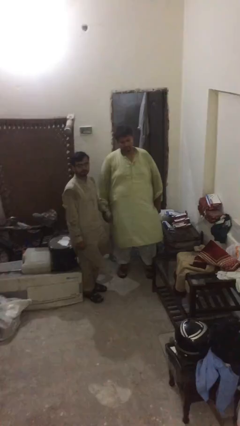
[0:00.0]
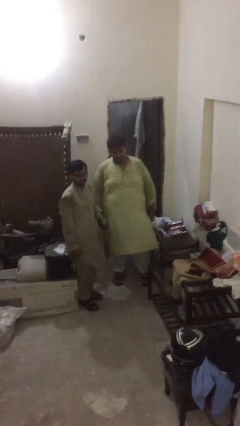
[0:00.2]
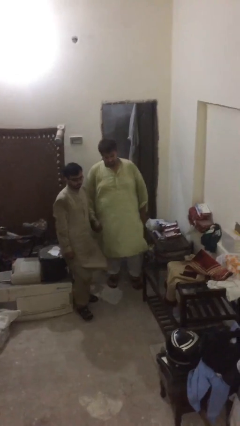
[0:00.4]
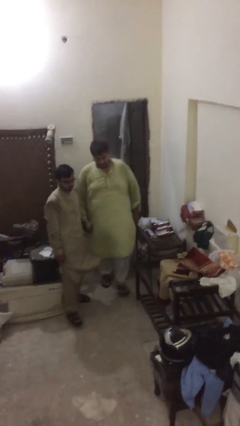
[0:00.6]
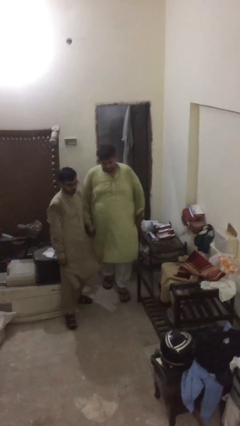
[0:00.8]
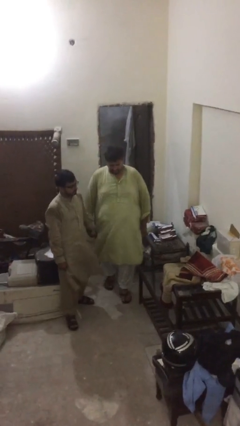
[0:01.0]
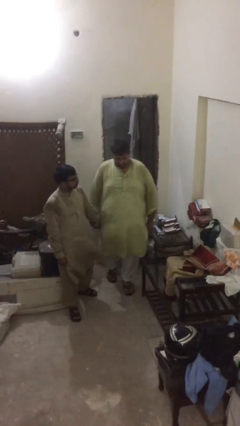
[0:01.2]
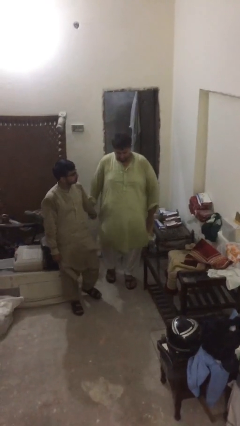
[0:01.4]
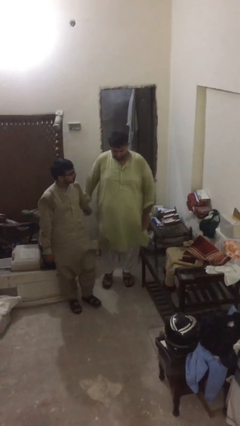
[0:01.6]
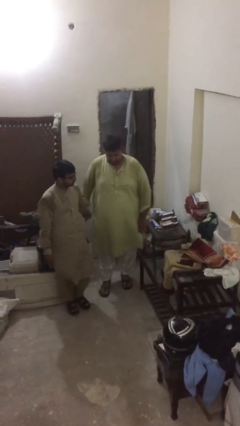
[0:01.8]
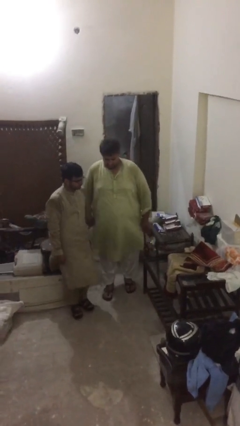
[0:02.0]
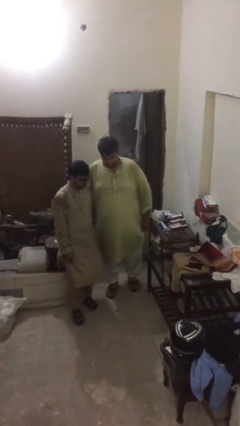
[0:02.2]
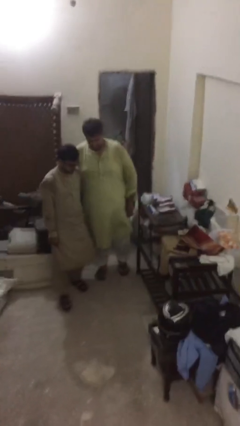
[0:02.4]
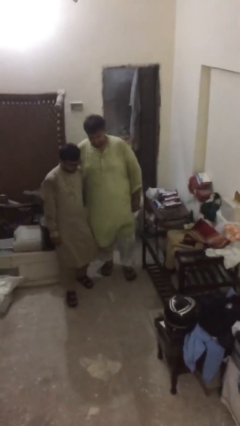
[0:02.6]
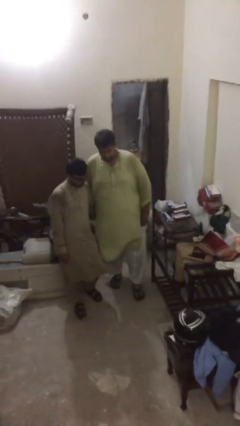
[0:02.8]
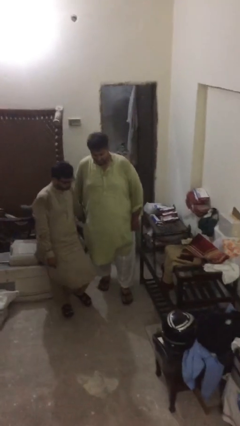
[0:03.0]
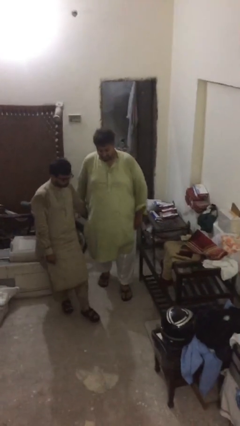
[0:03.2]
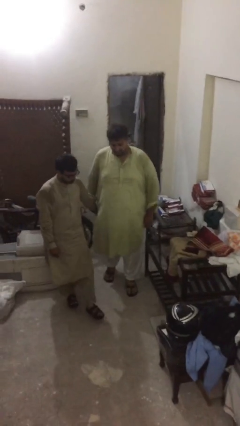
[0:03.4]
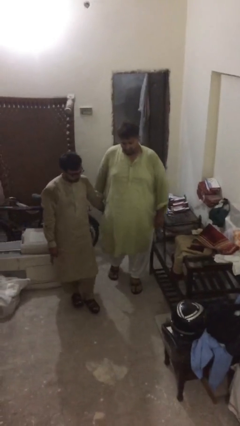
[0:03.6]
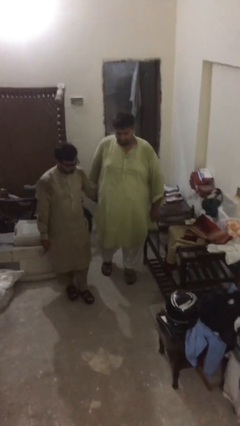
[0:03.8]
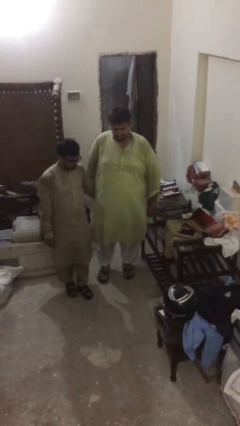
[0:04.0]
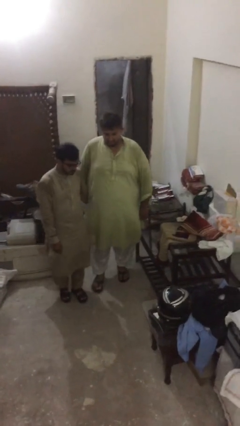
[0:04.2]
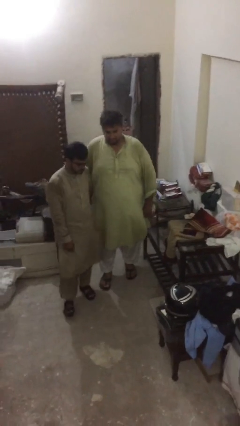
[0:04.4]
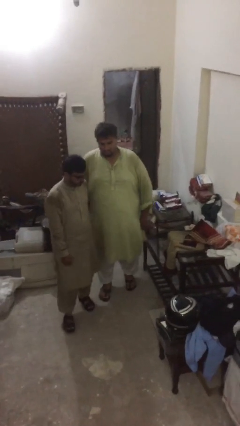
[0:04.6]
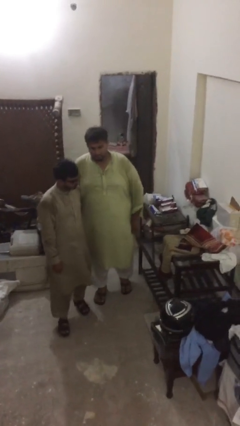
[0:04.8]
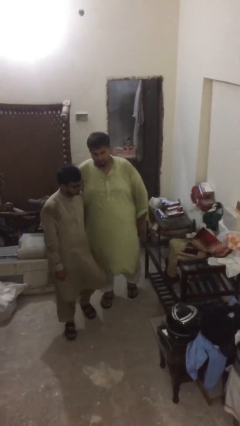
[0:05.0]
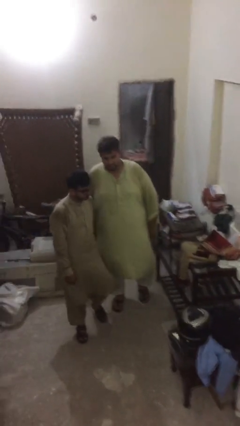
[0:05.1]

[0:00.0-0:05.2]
person holds hand

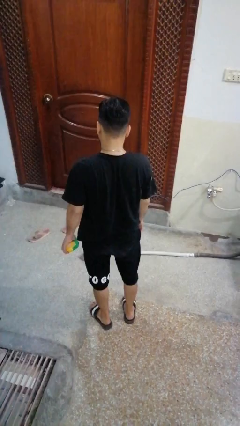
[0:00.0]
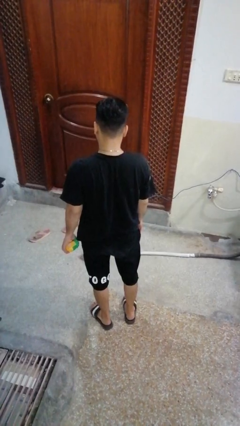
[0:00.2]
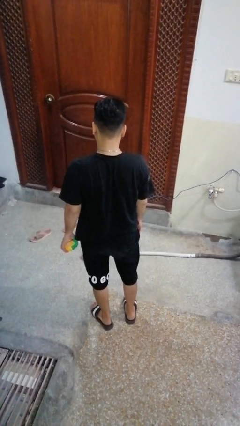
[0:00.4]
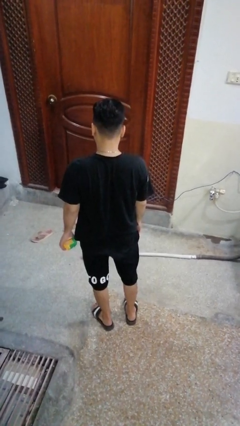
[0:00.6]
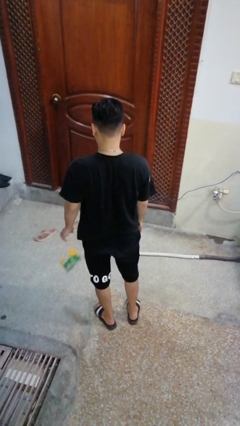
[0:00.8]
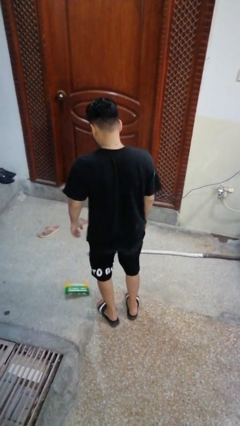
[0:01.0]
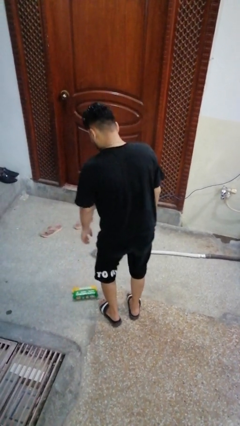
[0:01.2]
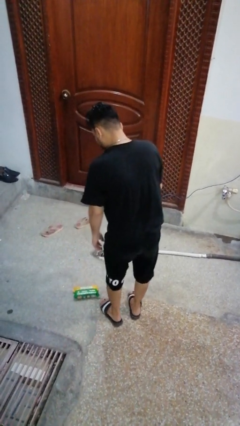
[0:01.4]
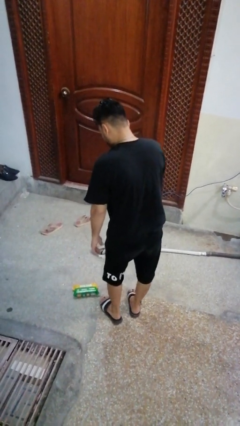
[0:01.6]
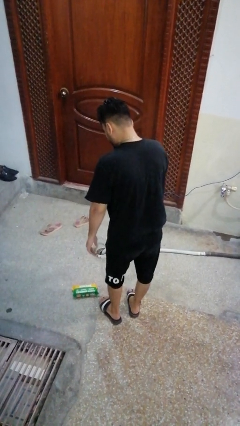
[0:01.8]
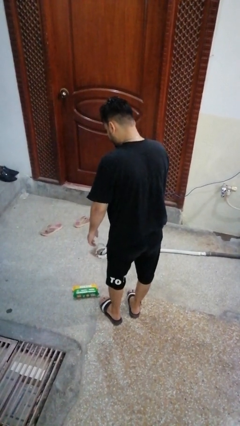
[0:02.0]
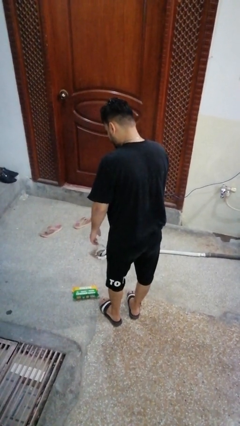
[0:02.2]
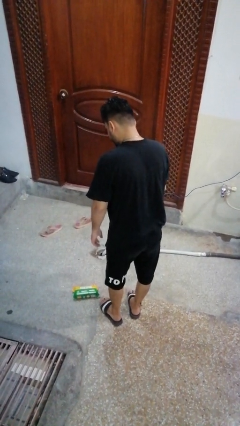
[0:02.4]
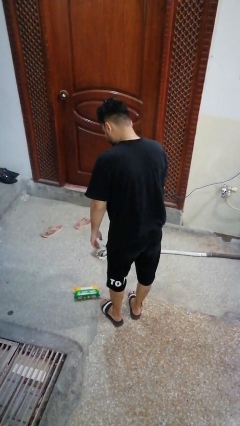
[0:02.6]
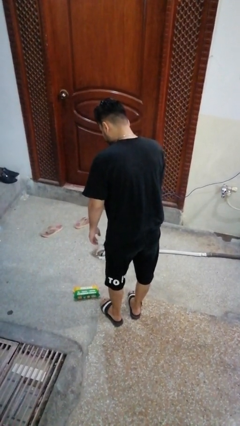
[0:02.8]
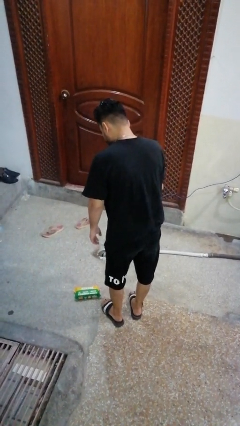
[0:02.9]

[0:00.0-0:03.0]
person drops object

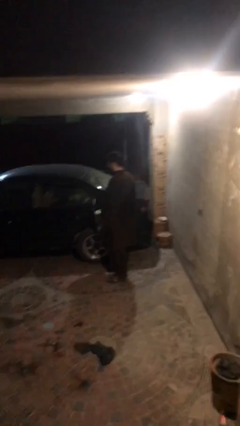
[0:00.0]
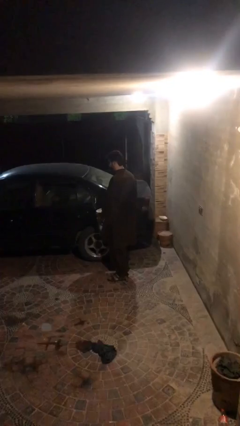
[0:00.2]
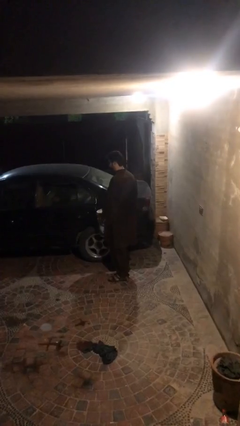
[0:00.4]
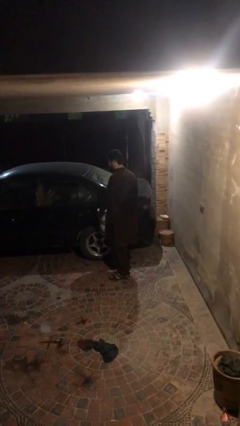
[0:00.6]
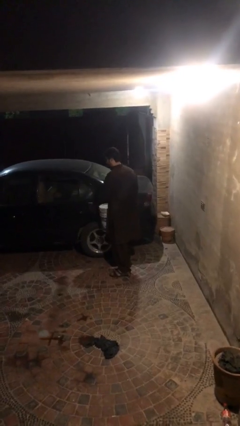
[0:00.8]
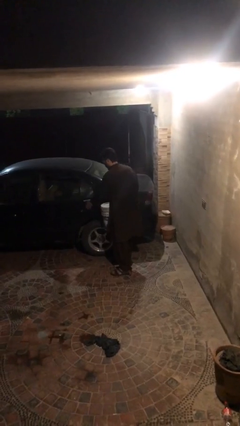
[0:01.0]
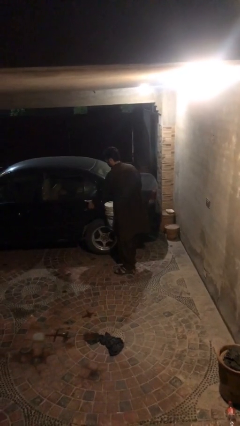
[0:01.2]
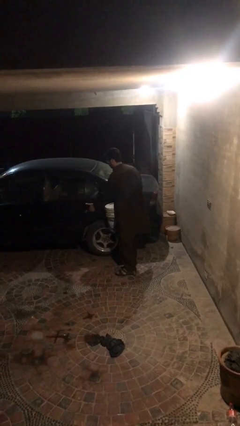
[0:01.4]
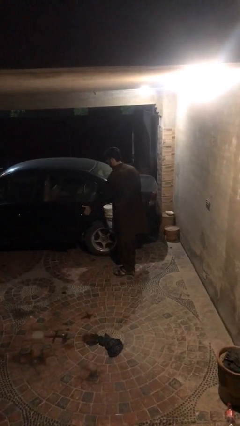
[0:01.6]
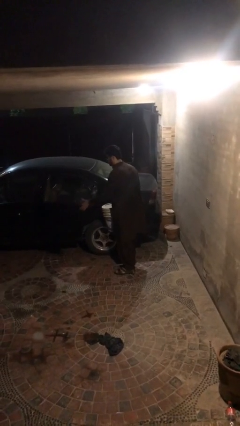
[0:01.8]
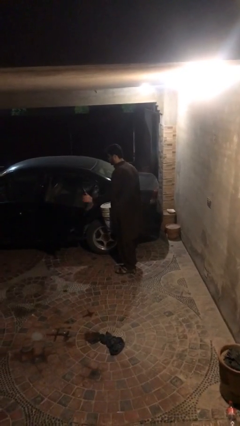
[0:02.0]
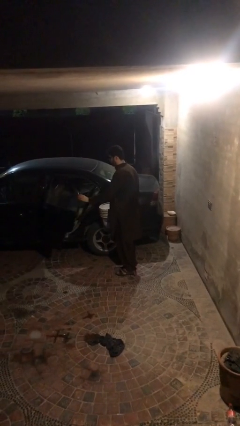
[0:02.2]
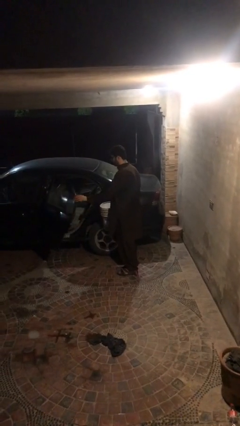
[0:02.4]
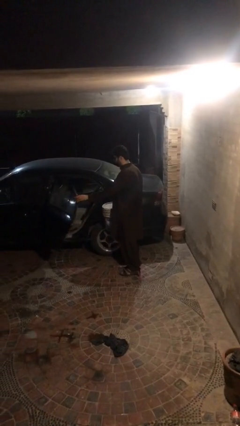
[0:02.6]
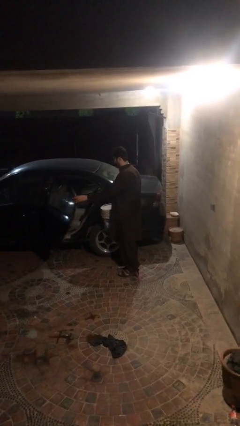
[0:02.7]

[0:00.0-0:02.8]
person opens car door

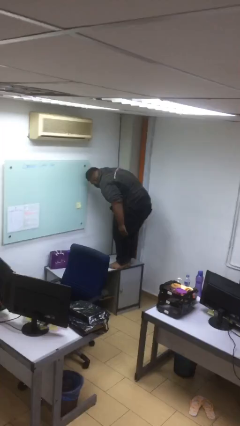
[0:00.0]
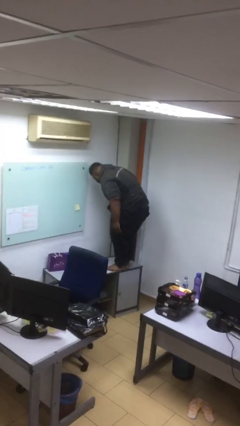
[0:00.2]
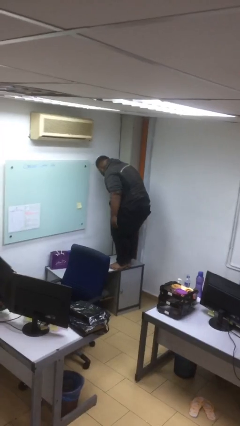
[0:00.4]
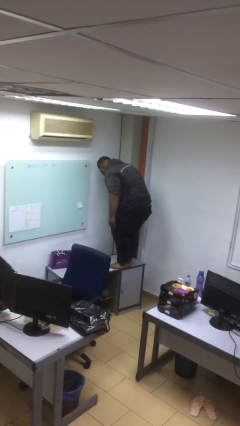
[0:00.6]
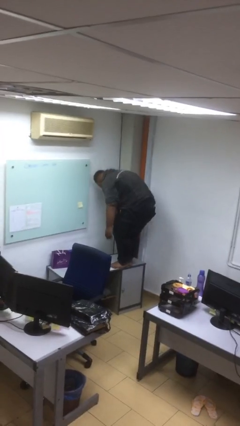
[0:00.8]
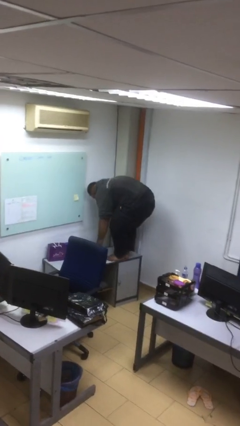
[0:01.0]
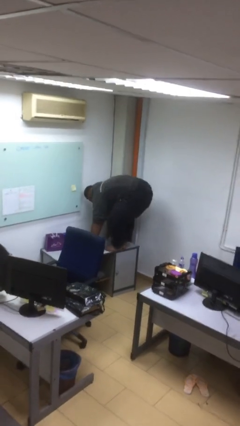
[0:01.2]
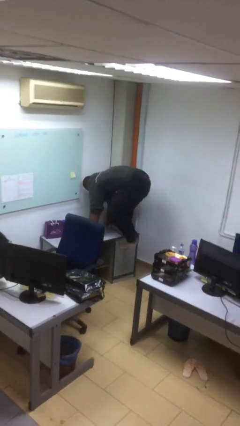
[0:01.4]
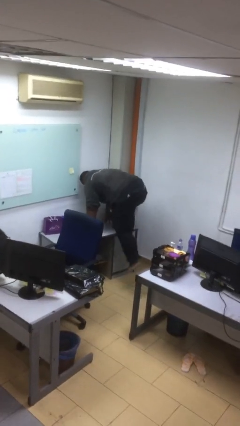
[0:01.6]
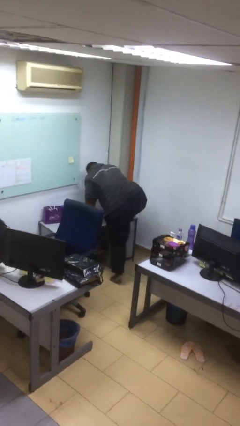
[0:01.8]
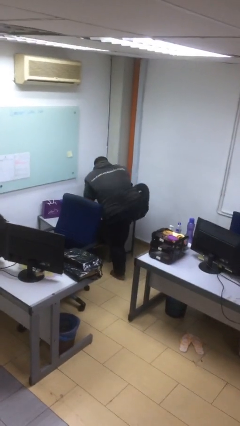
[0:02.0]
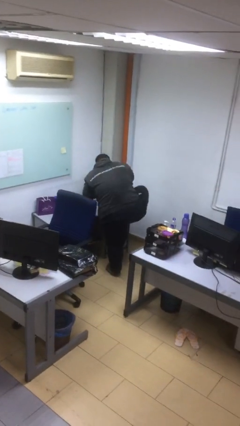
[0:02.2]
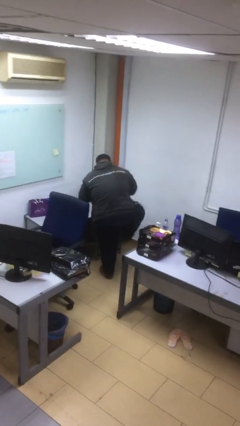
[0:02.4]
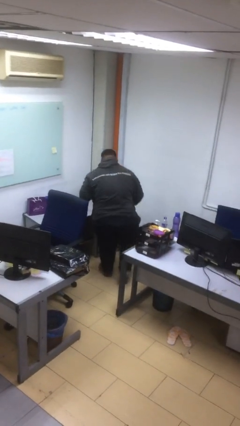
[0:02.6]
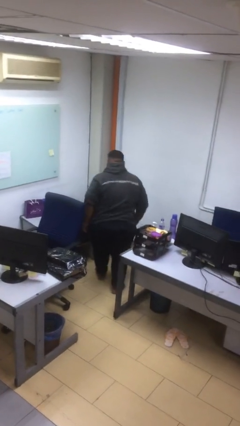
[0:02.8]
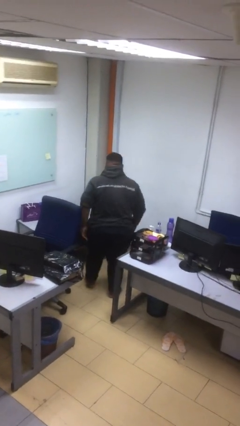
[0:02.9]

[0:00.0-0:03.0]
person climbs off table

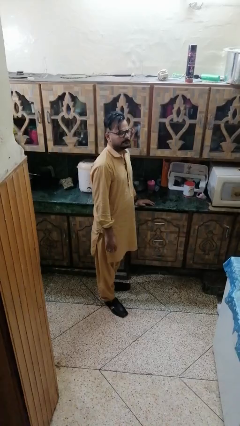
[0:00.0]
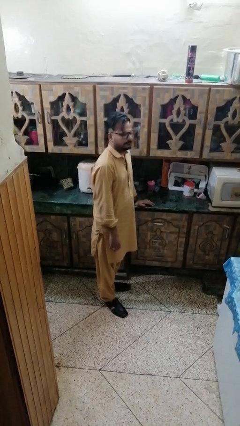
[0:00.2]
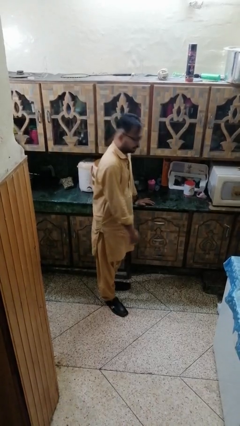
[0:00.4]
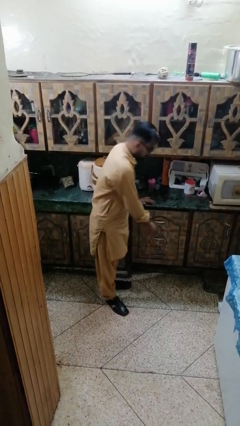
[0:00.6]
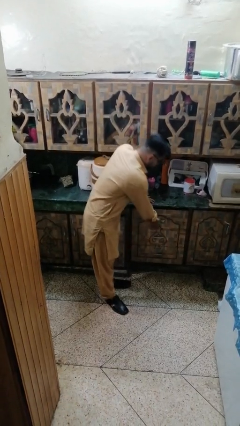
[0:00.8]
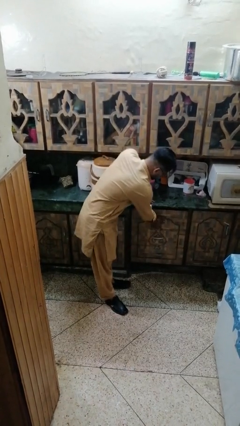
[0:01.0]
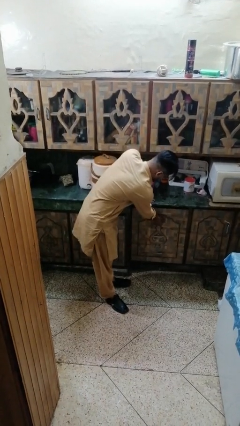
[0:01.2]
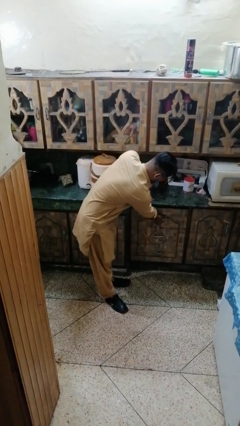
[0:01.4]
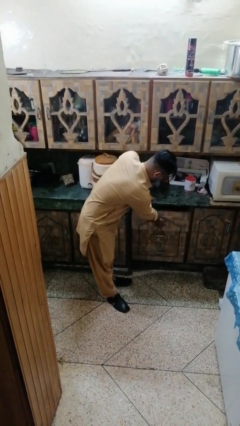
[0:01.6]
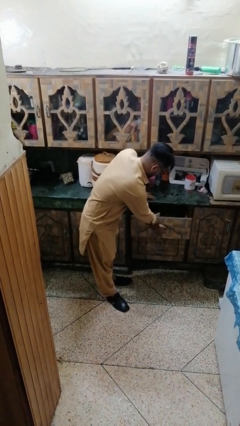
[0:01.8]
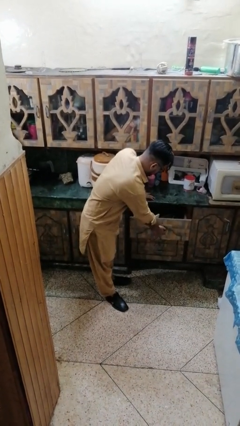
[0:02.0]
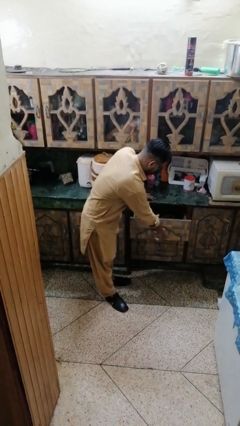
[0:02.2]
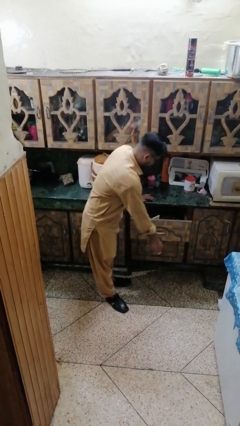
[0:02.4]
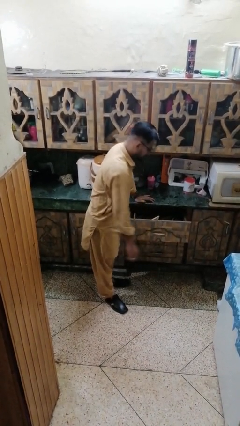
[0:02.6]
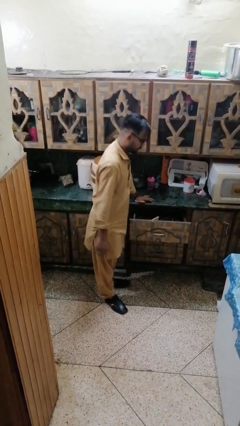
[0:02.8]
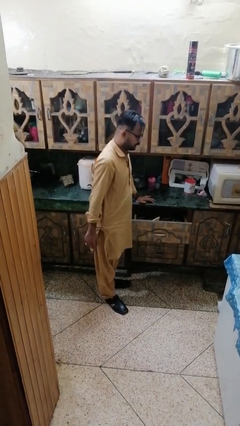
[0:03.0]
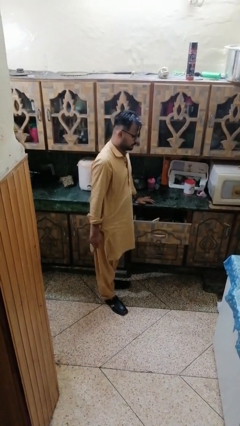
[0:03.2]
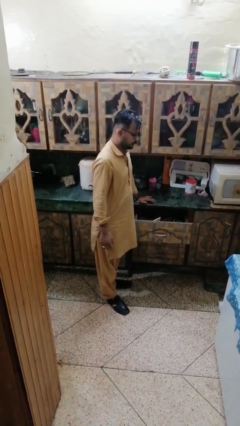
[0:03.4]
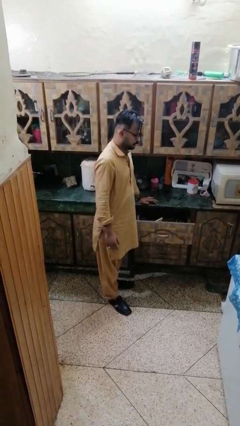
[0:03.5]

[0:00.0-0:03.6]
person opens kitchen drawer
